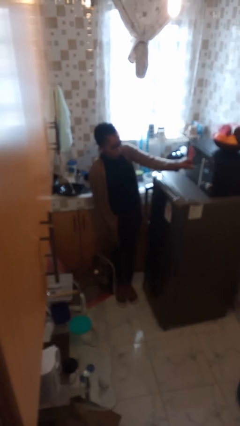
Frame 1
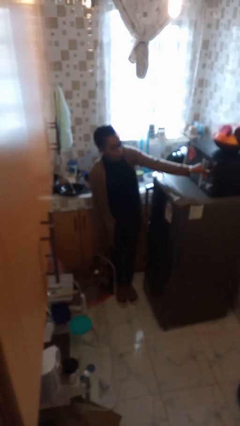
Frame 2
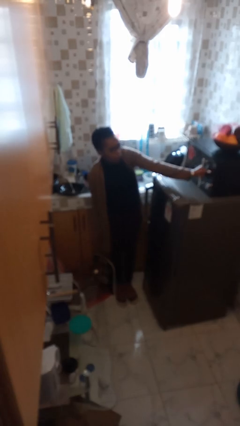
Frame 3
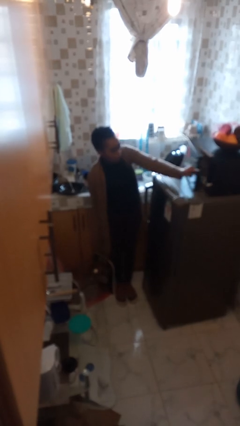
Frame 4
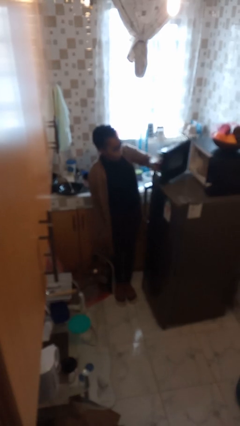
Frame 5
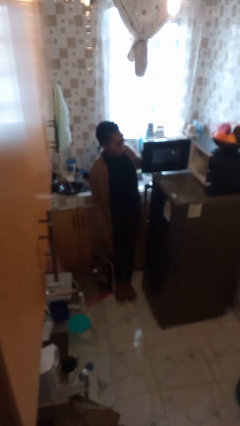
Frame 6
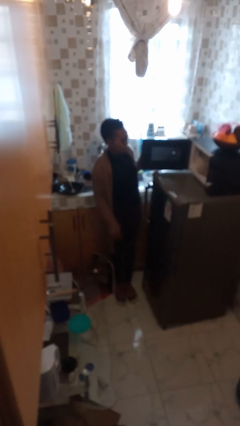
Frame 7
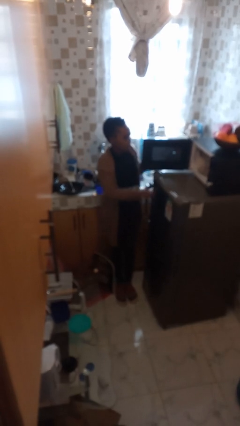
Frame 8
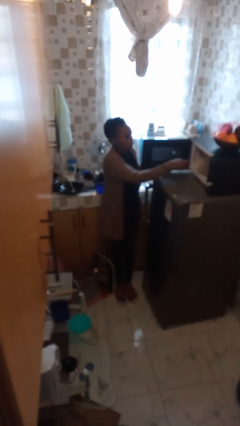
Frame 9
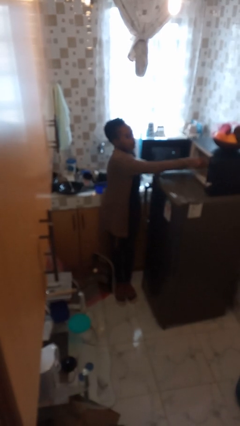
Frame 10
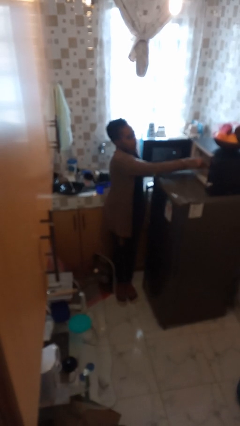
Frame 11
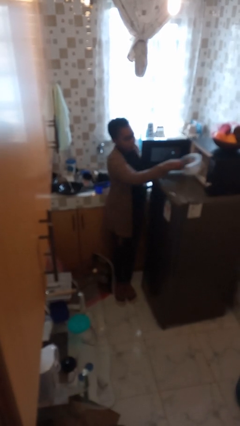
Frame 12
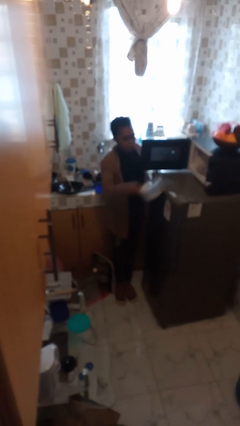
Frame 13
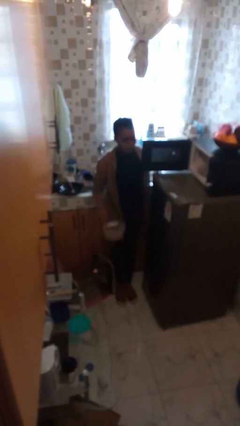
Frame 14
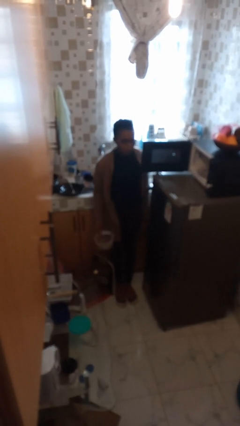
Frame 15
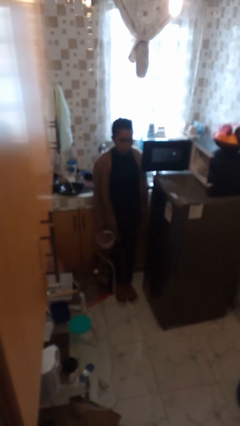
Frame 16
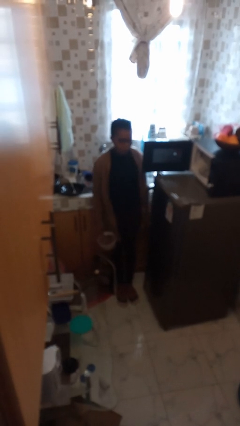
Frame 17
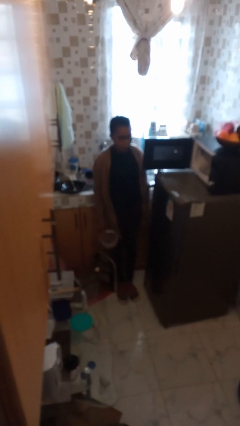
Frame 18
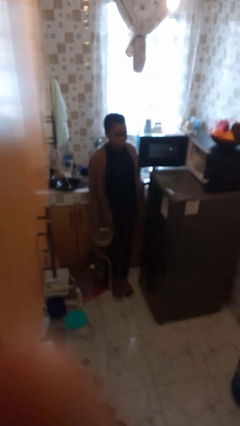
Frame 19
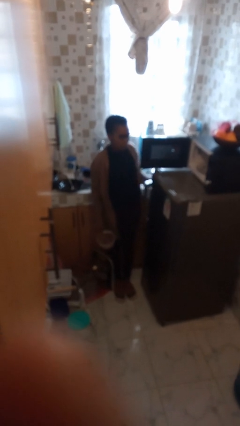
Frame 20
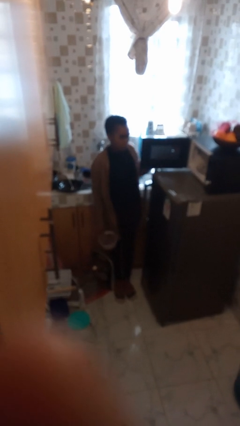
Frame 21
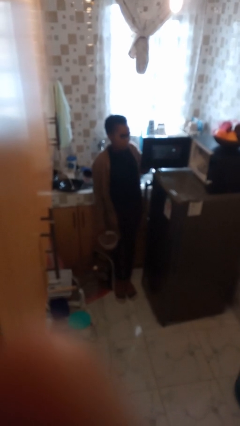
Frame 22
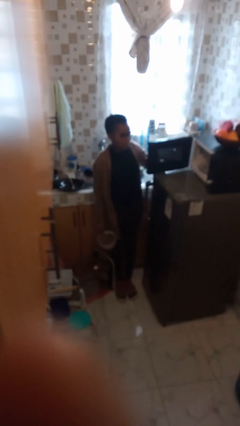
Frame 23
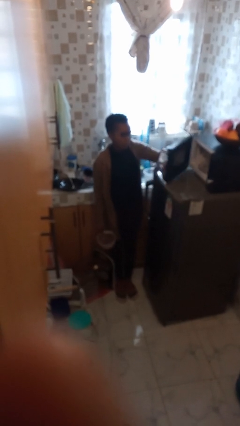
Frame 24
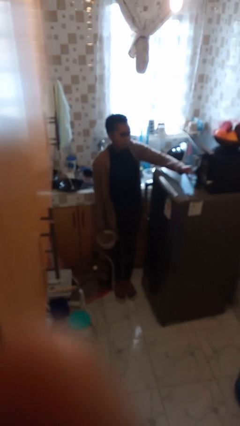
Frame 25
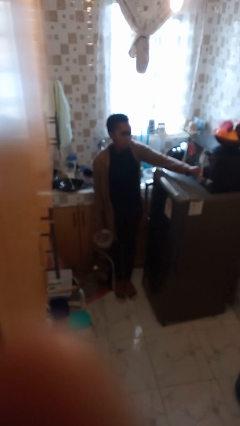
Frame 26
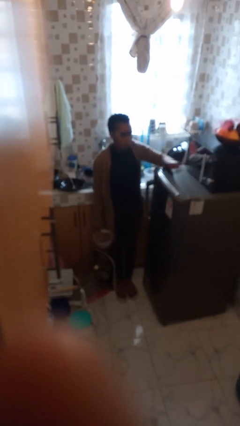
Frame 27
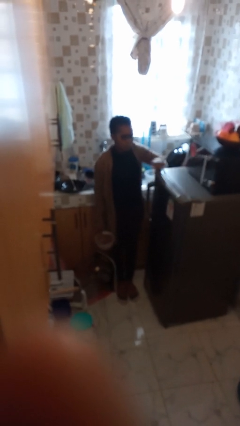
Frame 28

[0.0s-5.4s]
person takes object from microwave

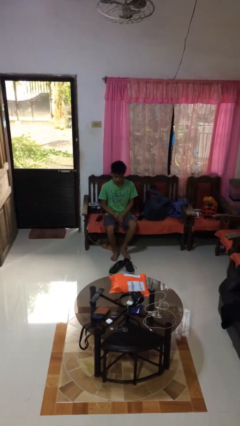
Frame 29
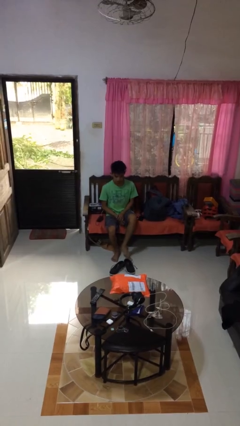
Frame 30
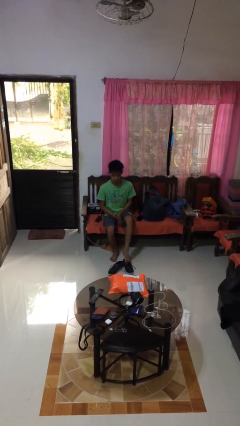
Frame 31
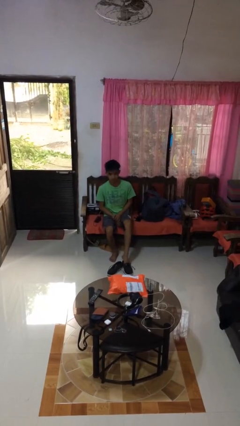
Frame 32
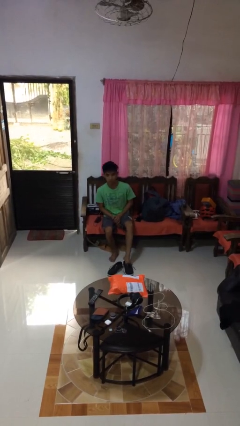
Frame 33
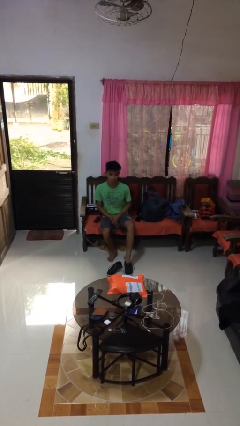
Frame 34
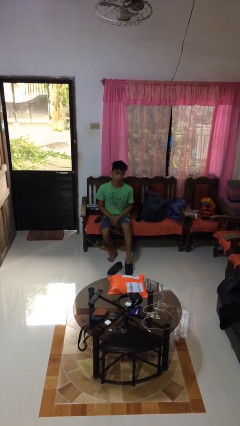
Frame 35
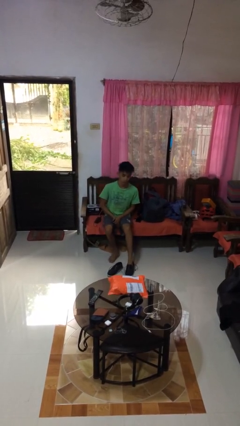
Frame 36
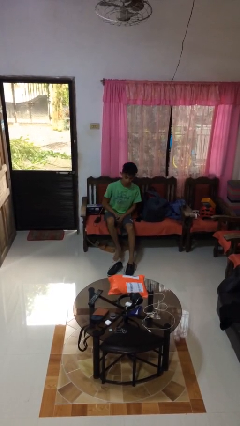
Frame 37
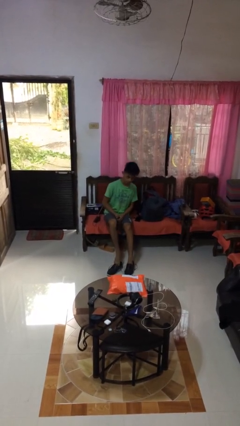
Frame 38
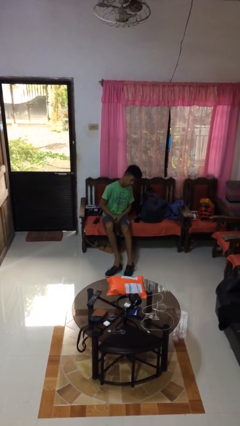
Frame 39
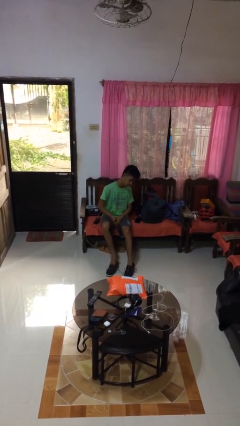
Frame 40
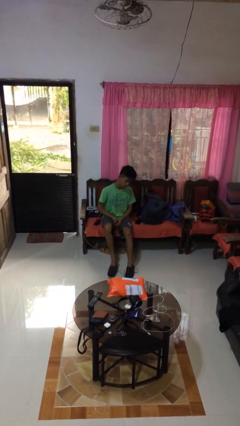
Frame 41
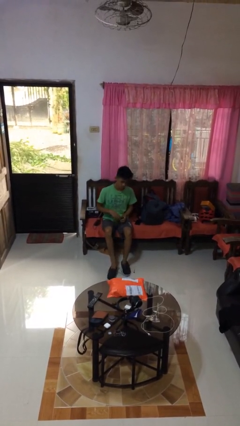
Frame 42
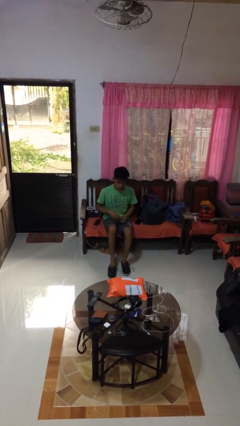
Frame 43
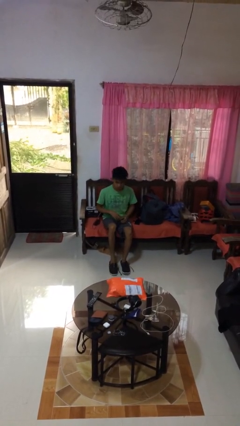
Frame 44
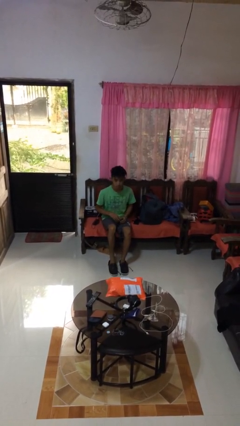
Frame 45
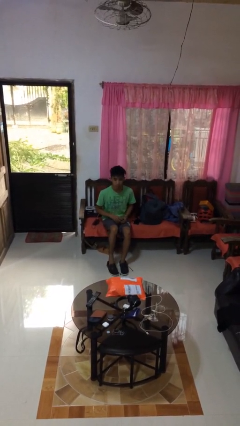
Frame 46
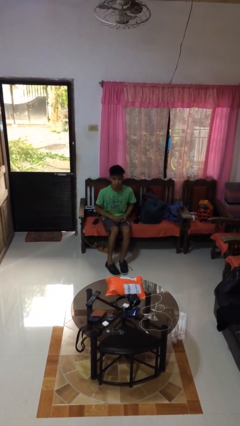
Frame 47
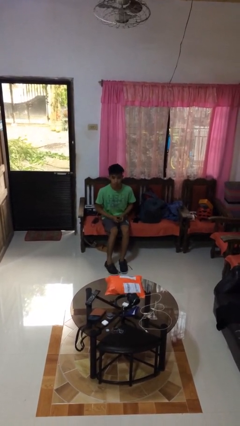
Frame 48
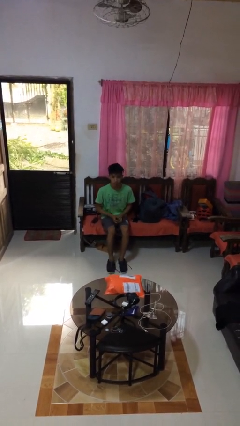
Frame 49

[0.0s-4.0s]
person puts on shoes

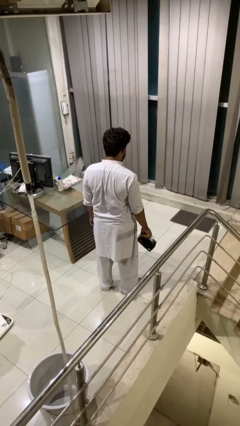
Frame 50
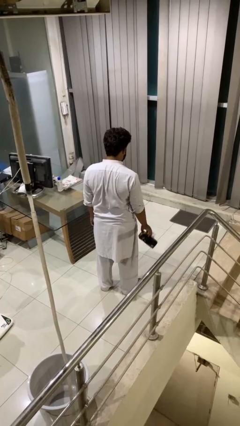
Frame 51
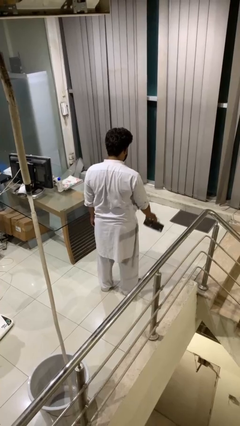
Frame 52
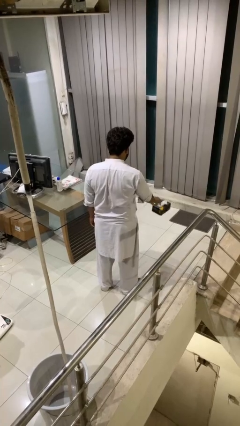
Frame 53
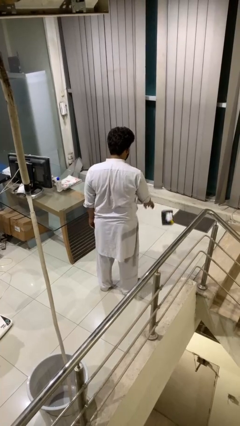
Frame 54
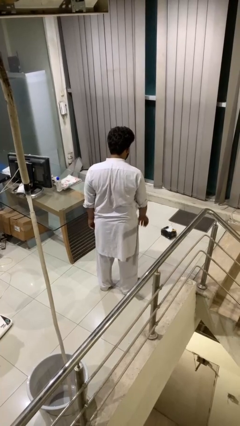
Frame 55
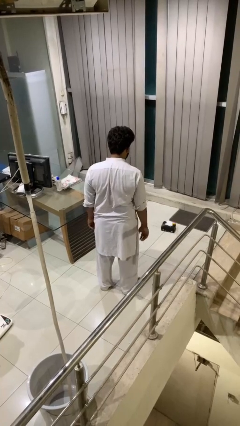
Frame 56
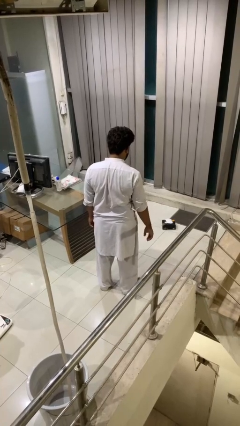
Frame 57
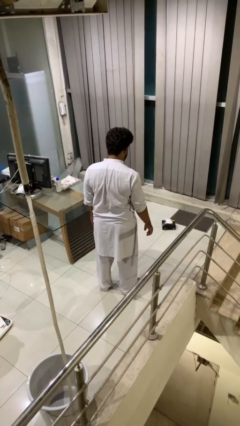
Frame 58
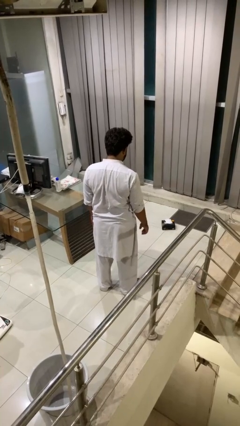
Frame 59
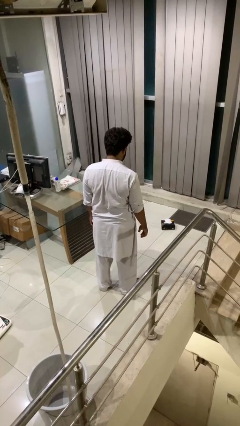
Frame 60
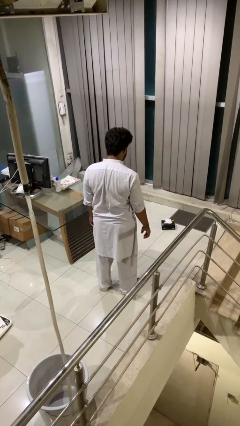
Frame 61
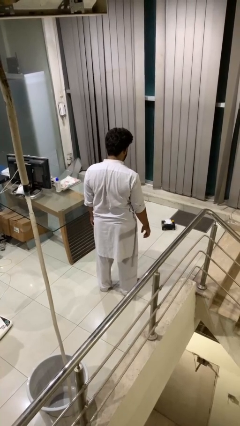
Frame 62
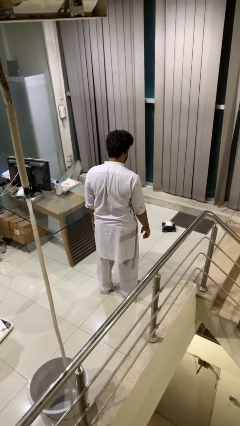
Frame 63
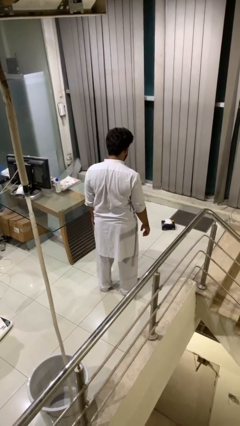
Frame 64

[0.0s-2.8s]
person throws object to ground

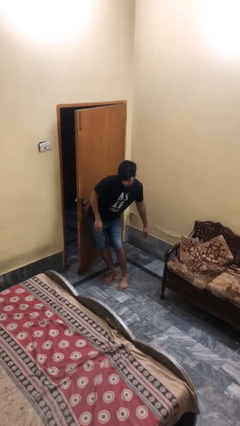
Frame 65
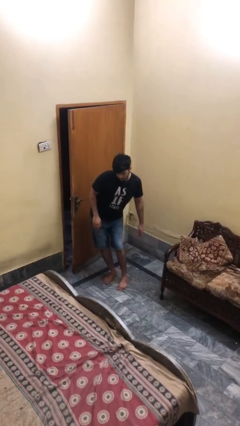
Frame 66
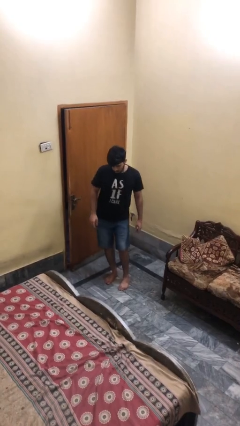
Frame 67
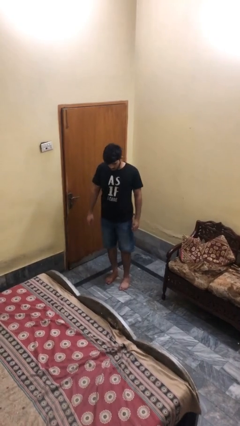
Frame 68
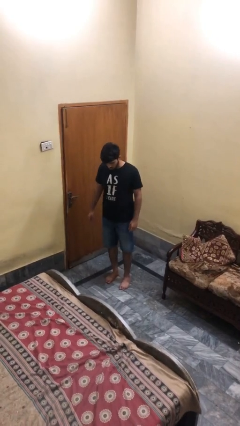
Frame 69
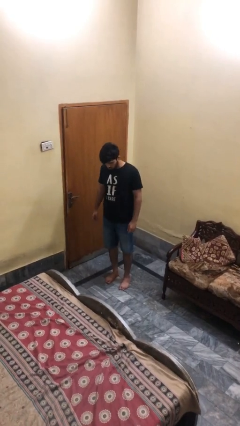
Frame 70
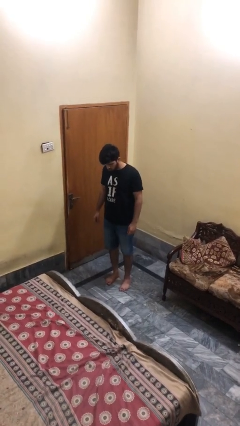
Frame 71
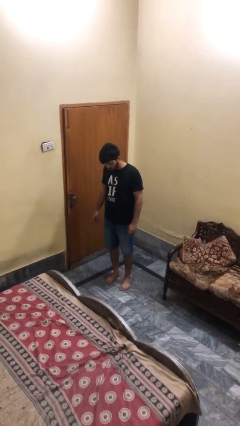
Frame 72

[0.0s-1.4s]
person closes door with hip

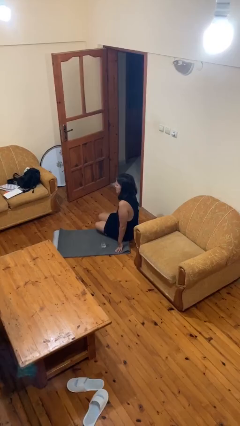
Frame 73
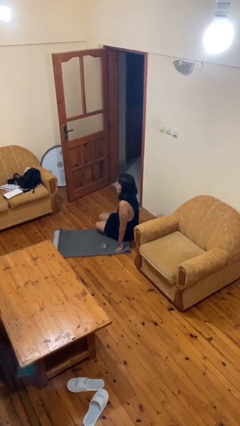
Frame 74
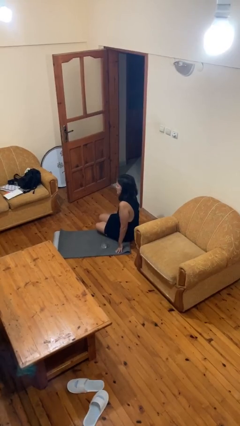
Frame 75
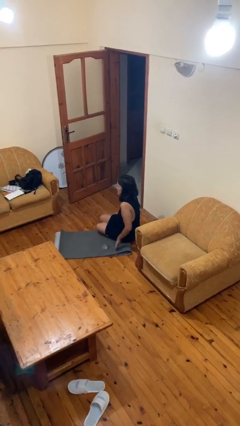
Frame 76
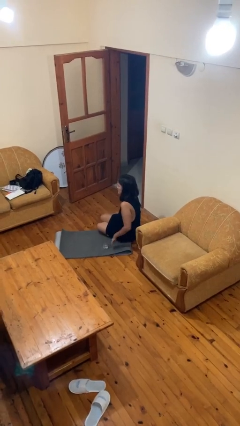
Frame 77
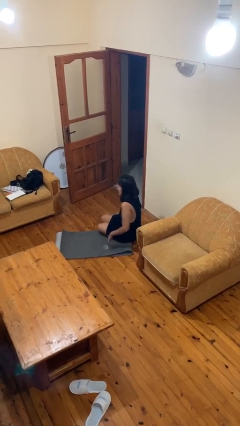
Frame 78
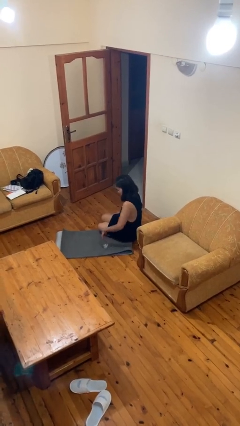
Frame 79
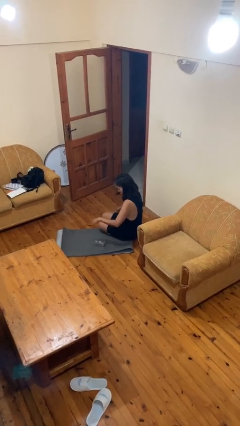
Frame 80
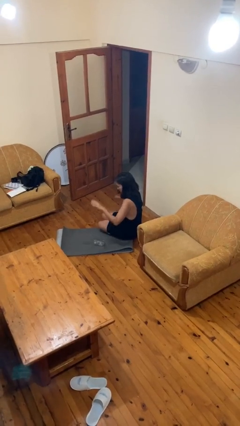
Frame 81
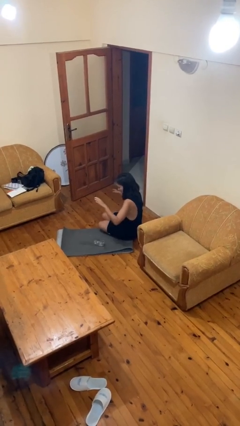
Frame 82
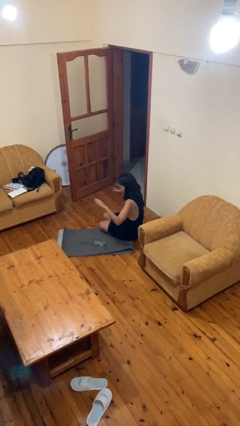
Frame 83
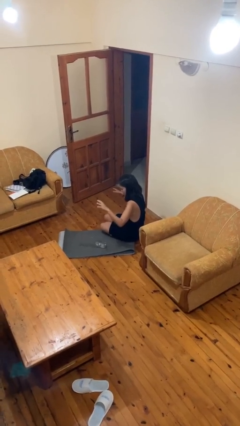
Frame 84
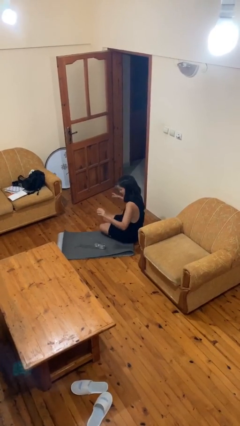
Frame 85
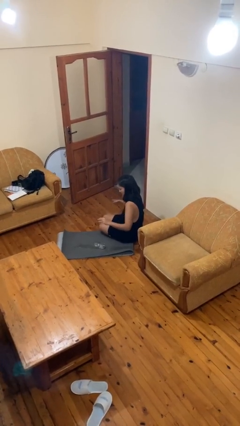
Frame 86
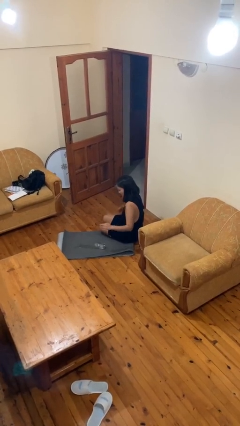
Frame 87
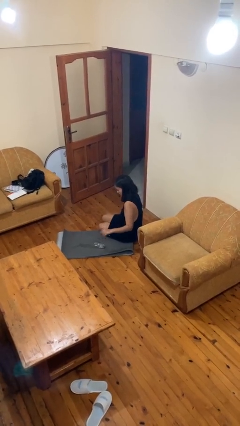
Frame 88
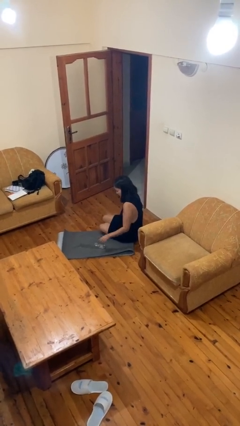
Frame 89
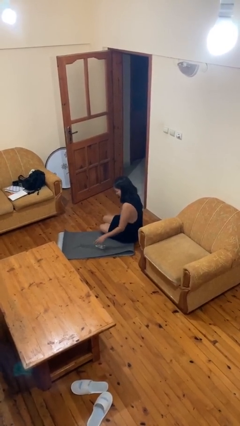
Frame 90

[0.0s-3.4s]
person spills on floor

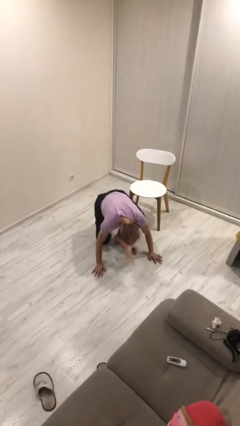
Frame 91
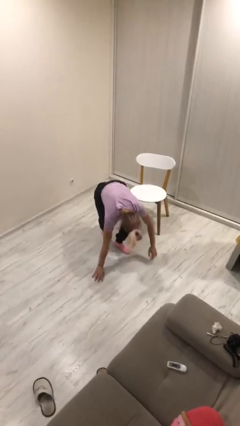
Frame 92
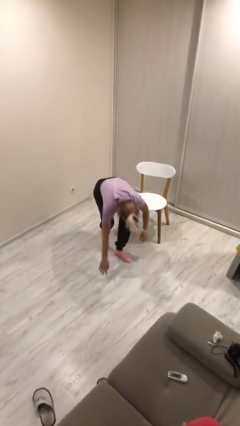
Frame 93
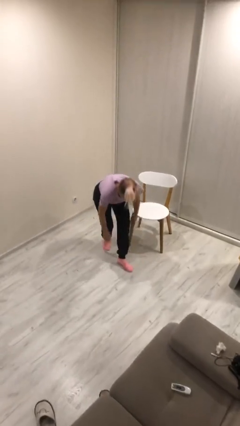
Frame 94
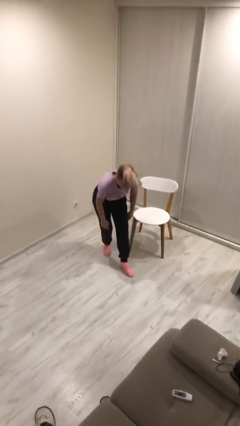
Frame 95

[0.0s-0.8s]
person stands up from floor
